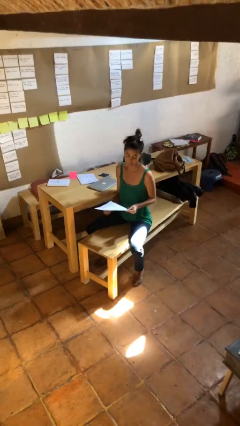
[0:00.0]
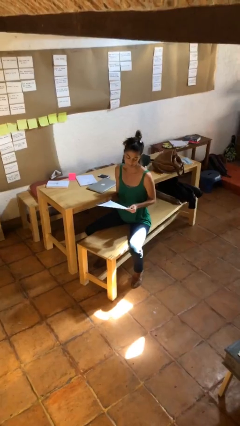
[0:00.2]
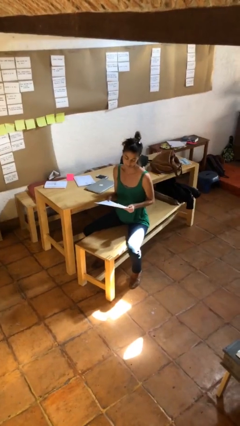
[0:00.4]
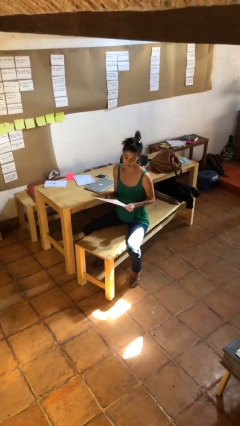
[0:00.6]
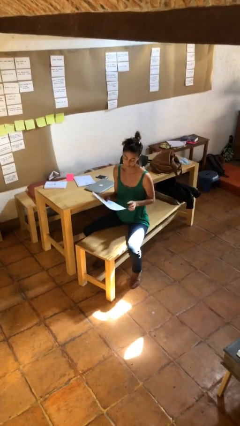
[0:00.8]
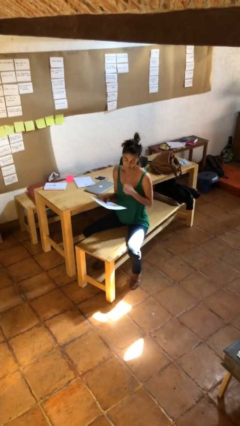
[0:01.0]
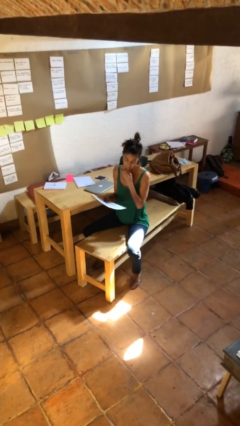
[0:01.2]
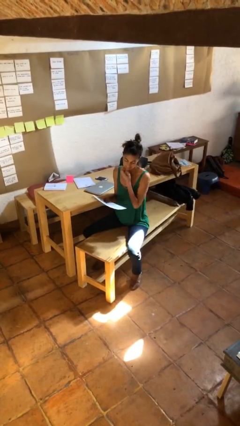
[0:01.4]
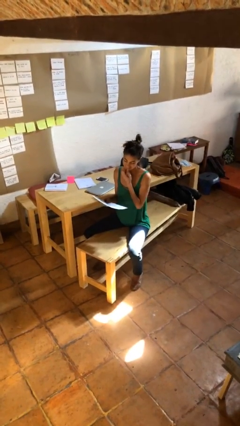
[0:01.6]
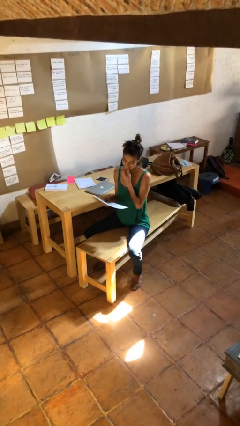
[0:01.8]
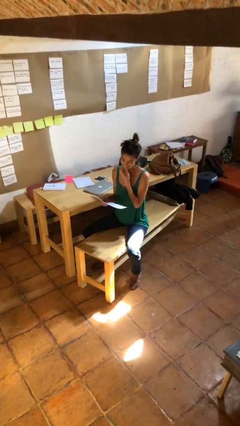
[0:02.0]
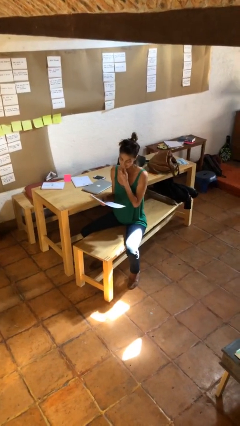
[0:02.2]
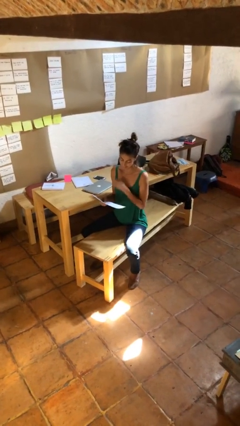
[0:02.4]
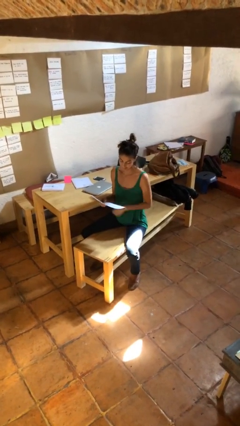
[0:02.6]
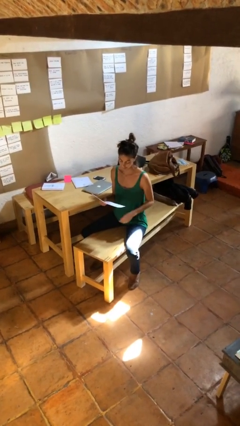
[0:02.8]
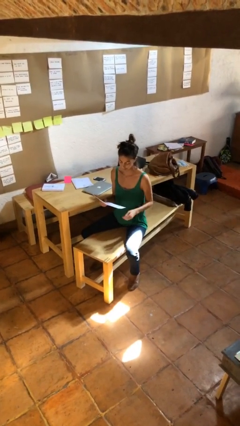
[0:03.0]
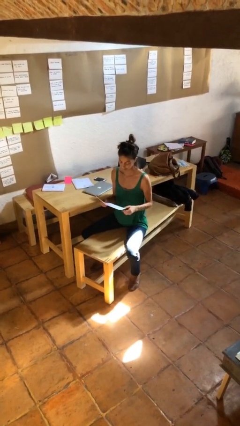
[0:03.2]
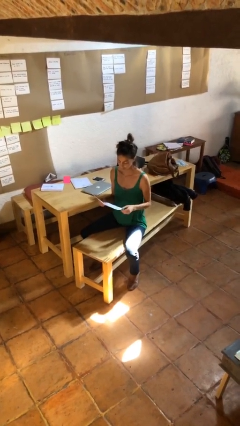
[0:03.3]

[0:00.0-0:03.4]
person reads document

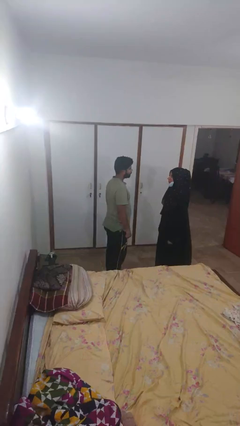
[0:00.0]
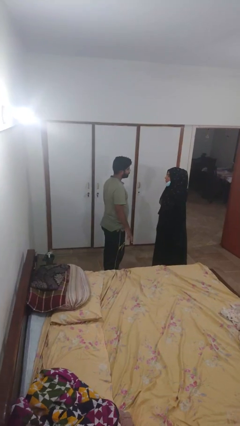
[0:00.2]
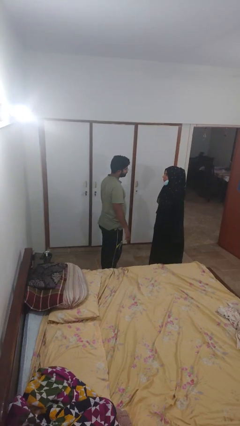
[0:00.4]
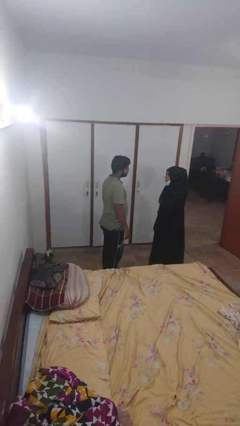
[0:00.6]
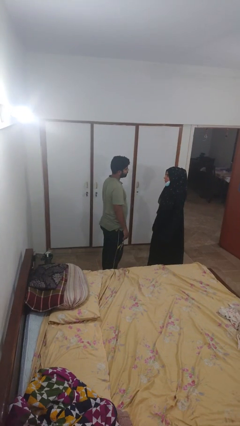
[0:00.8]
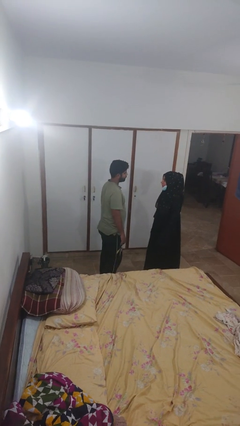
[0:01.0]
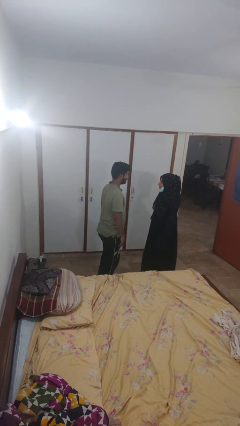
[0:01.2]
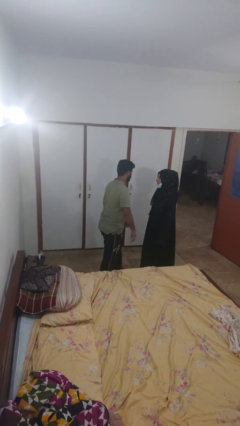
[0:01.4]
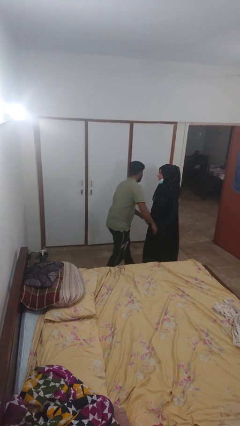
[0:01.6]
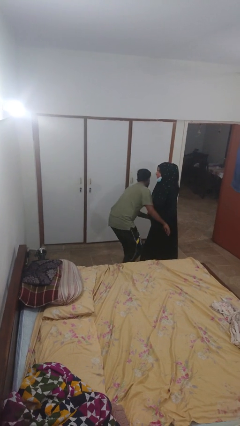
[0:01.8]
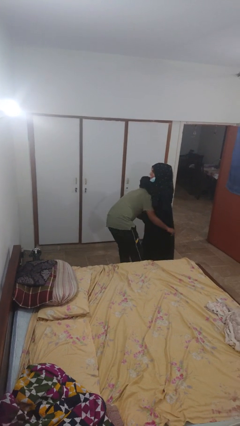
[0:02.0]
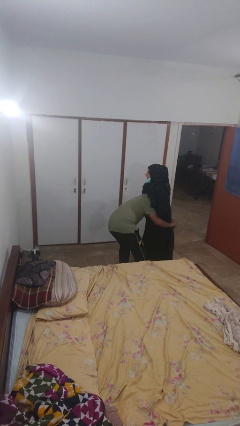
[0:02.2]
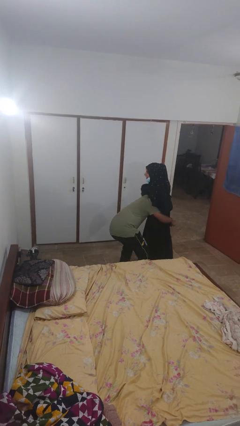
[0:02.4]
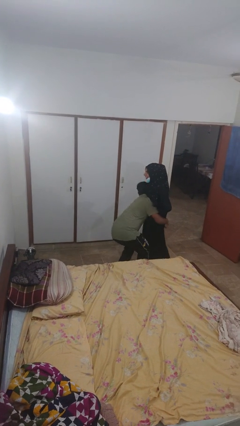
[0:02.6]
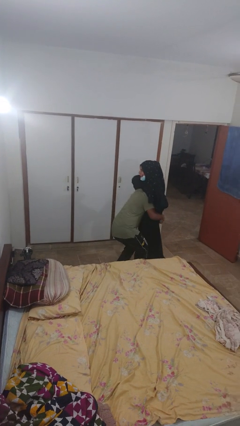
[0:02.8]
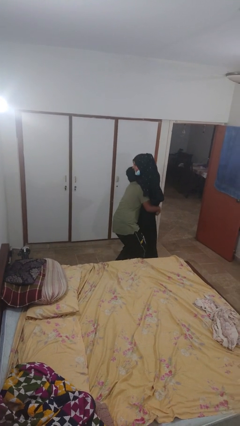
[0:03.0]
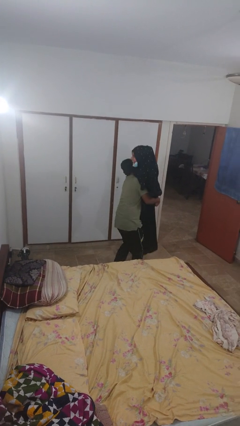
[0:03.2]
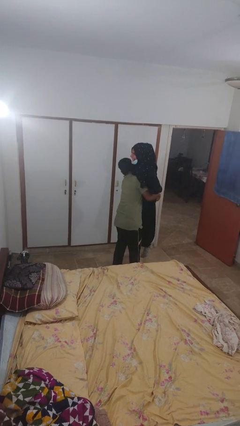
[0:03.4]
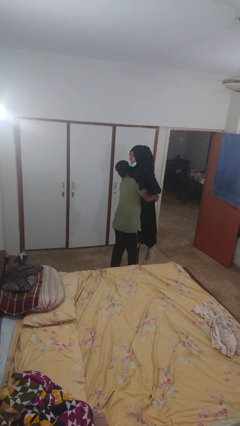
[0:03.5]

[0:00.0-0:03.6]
person picks up person

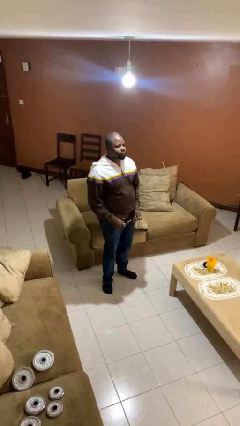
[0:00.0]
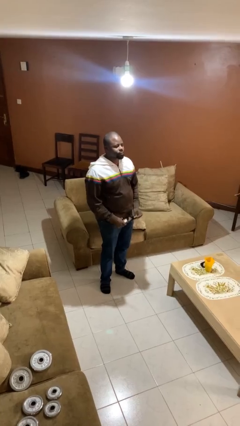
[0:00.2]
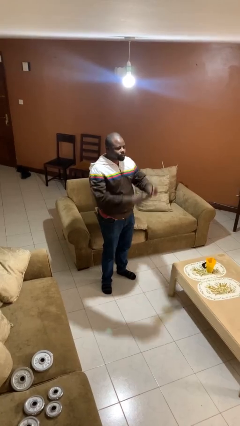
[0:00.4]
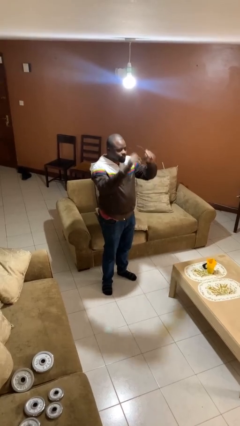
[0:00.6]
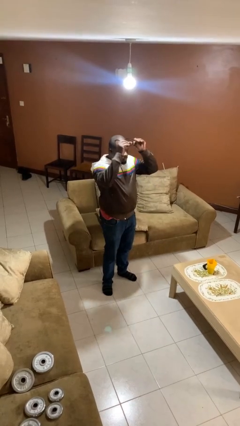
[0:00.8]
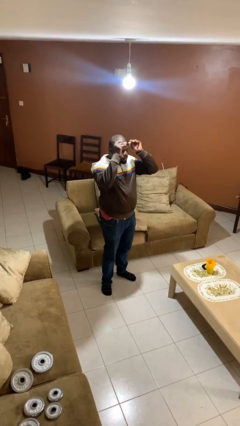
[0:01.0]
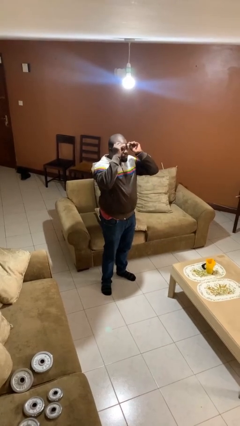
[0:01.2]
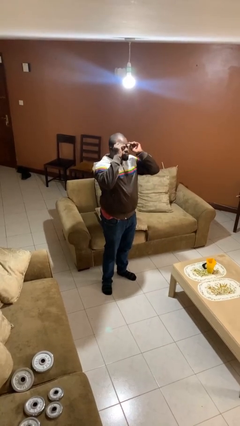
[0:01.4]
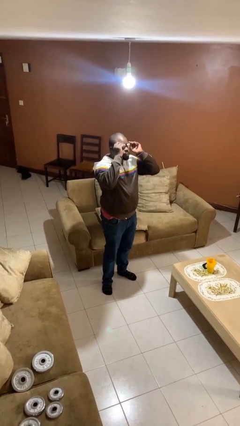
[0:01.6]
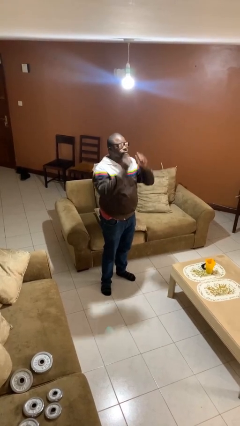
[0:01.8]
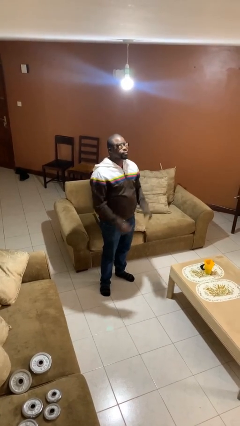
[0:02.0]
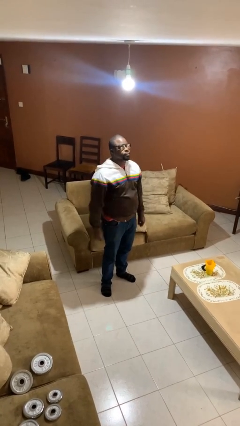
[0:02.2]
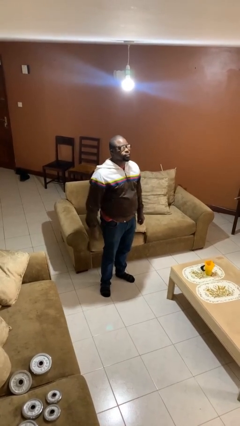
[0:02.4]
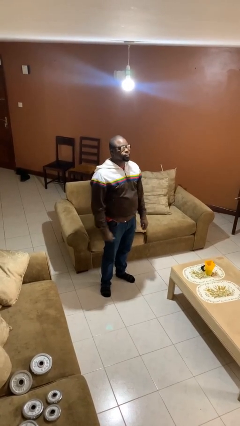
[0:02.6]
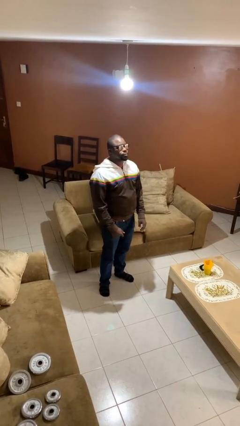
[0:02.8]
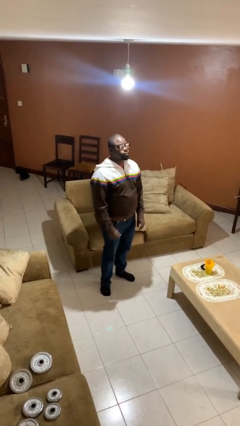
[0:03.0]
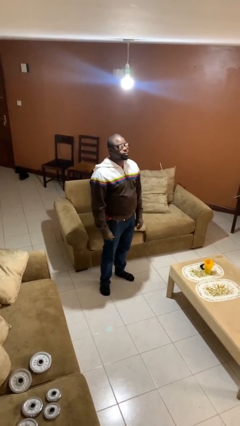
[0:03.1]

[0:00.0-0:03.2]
person puts on sunglasses

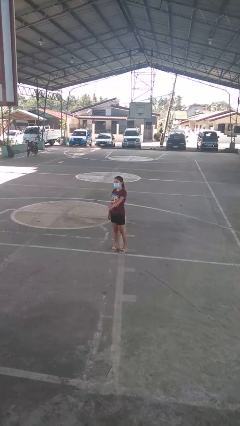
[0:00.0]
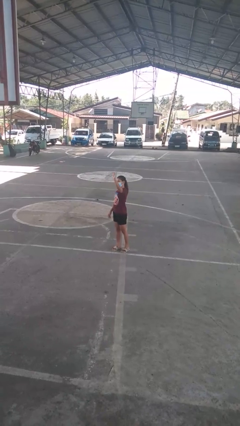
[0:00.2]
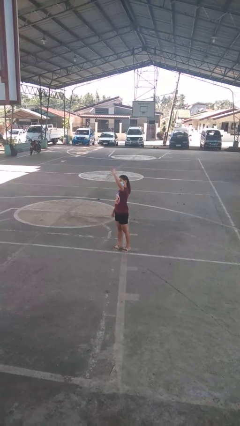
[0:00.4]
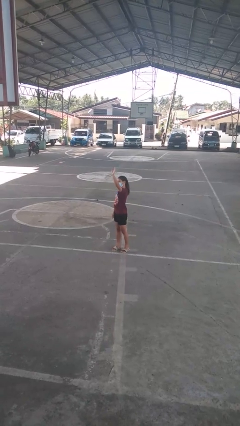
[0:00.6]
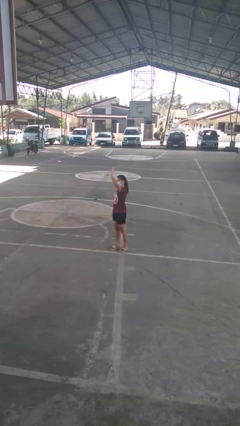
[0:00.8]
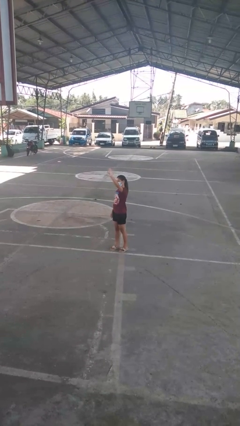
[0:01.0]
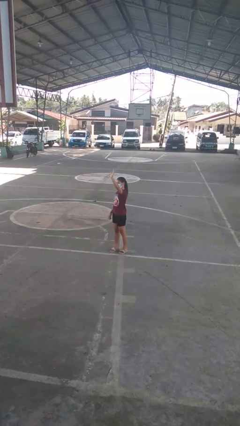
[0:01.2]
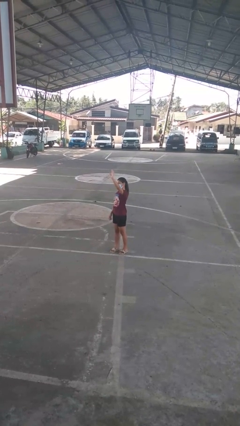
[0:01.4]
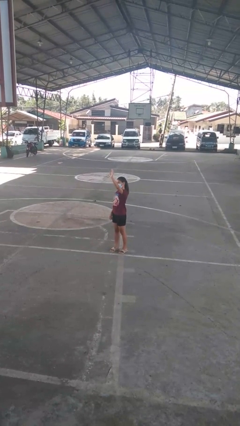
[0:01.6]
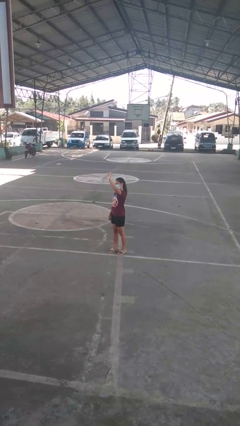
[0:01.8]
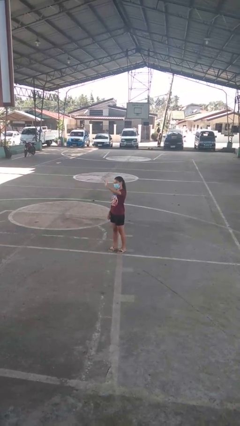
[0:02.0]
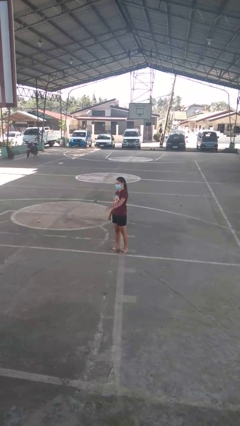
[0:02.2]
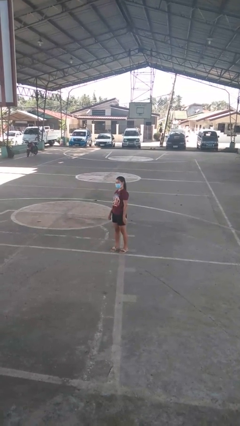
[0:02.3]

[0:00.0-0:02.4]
person waves at person

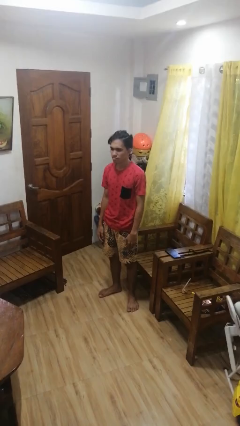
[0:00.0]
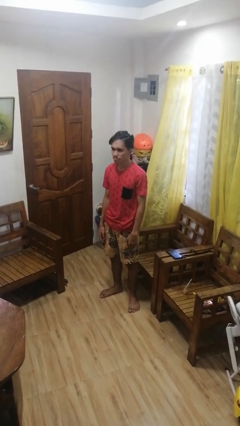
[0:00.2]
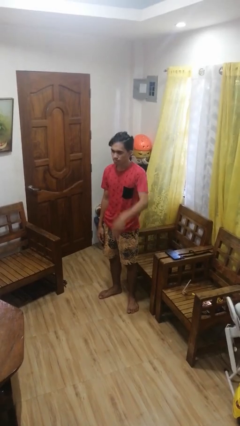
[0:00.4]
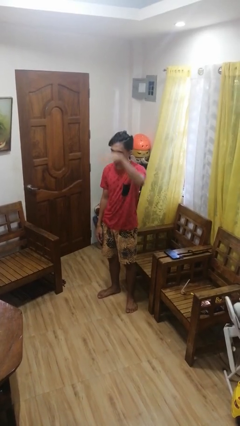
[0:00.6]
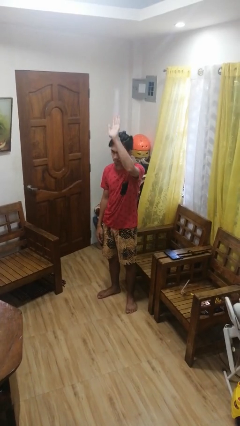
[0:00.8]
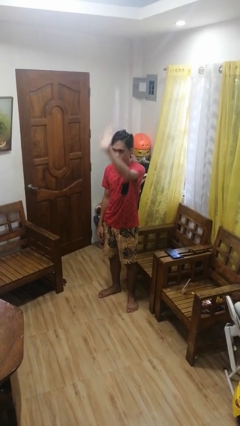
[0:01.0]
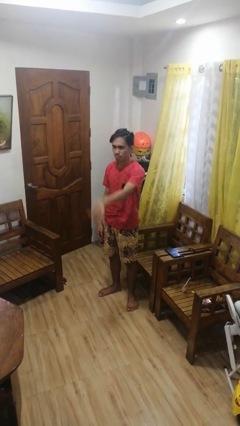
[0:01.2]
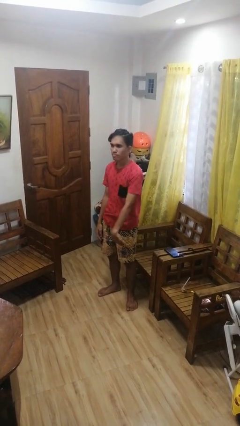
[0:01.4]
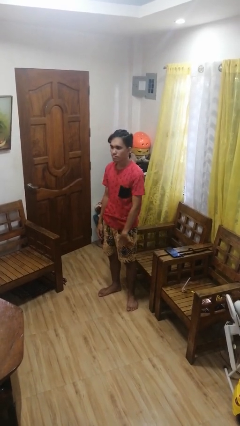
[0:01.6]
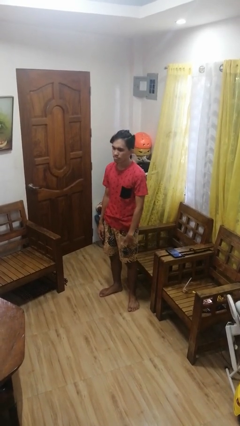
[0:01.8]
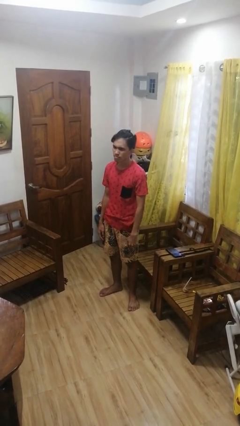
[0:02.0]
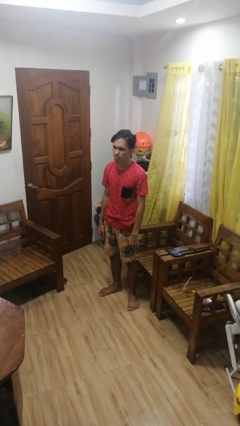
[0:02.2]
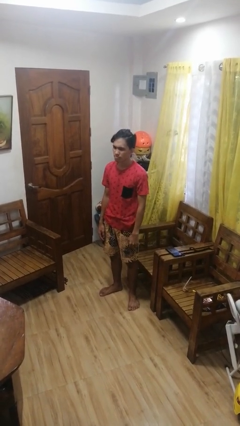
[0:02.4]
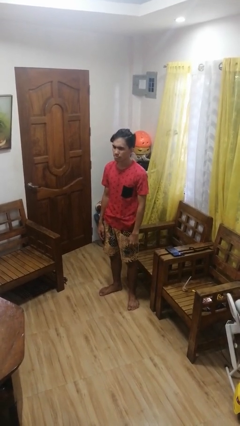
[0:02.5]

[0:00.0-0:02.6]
person gestures swipe down

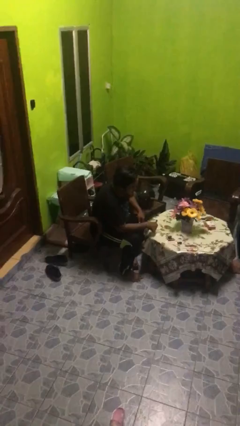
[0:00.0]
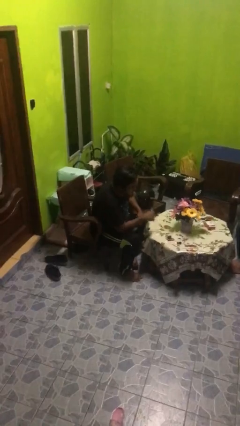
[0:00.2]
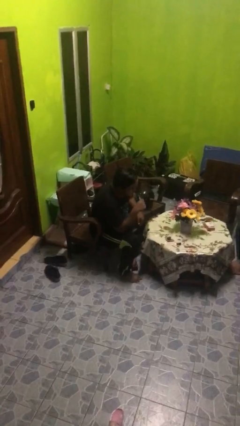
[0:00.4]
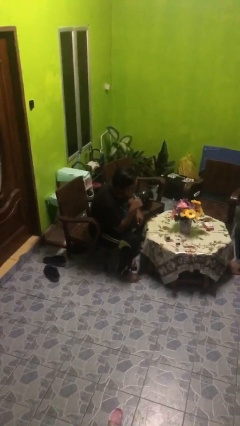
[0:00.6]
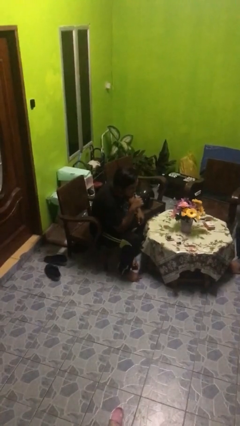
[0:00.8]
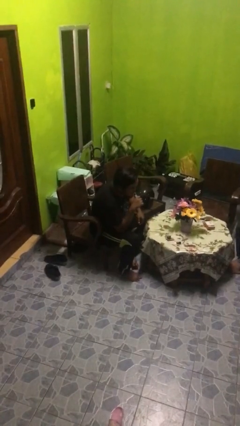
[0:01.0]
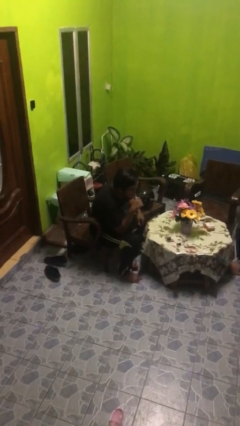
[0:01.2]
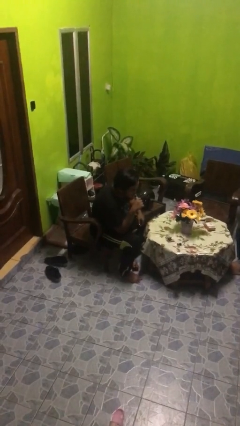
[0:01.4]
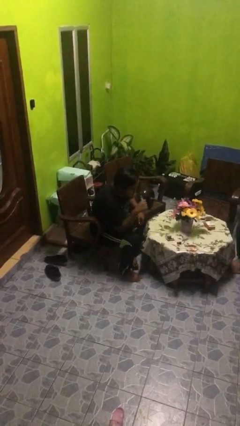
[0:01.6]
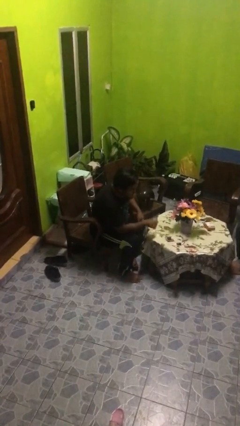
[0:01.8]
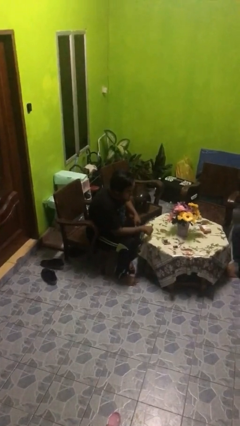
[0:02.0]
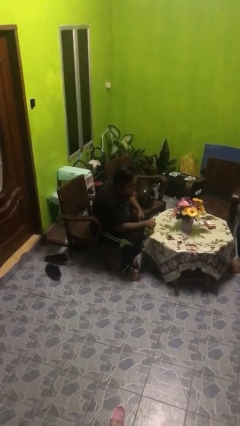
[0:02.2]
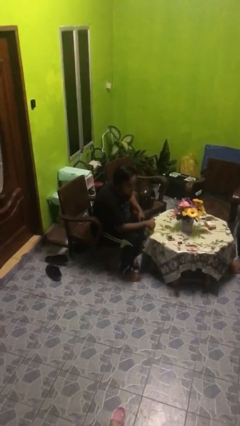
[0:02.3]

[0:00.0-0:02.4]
person vapes

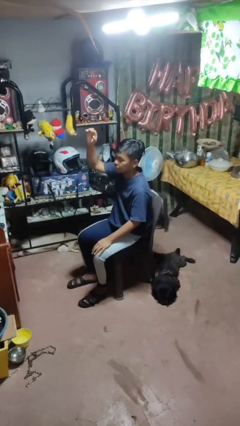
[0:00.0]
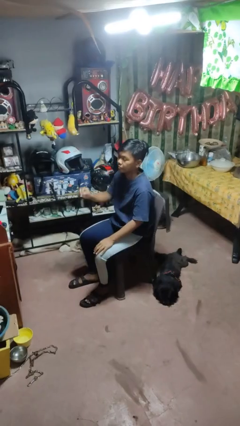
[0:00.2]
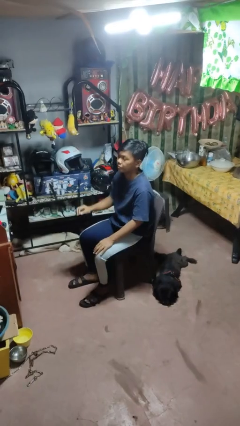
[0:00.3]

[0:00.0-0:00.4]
person gestures lower hand
